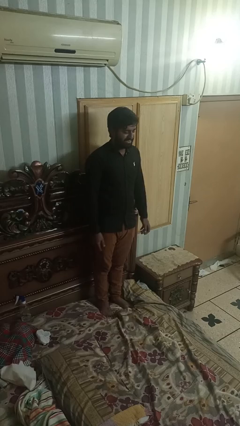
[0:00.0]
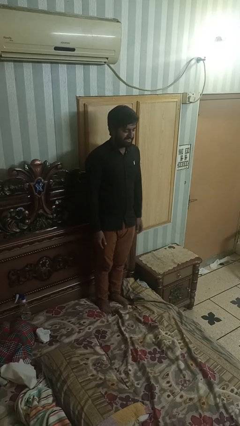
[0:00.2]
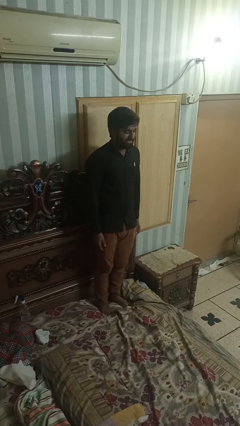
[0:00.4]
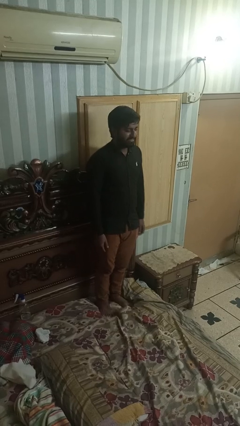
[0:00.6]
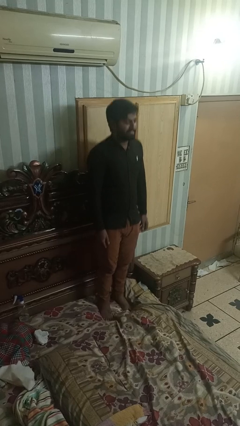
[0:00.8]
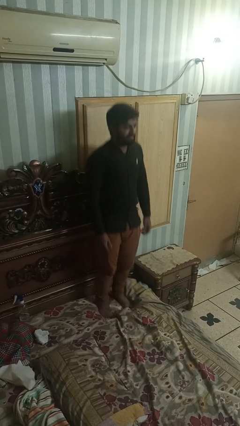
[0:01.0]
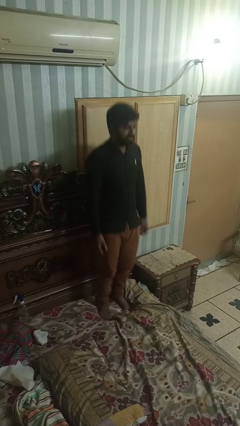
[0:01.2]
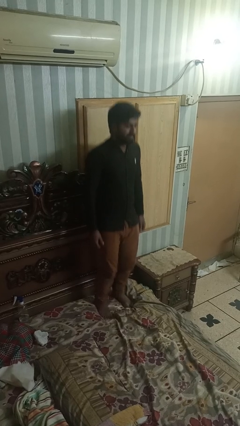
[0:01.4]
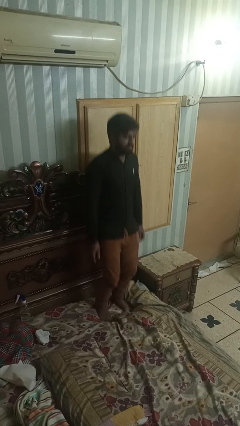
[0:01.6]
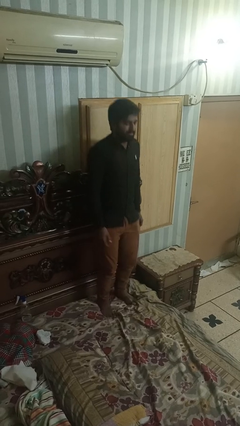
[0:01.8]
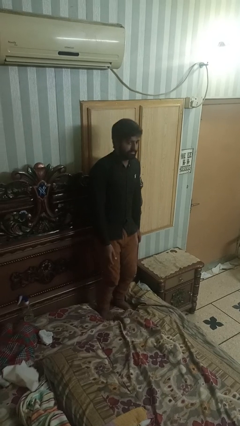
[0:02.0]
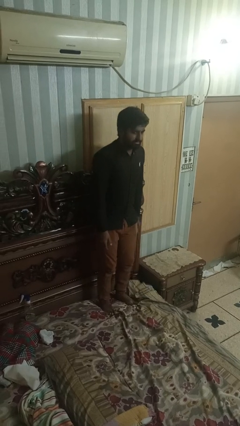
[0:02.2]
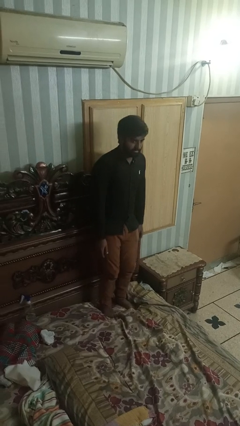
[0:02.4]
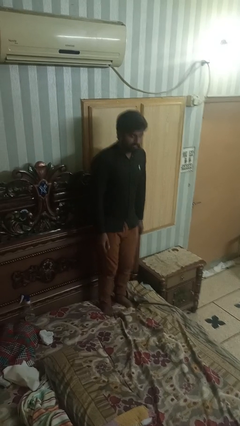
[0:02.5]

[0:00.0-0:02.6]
person jumps on bed

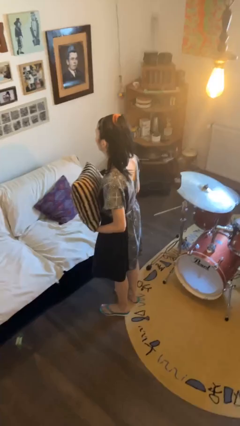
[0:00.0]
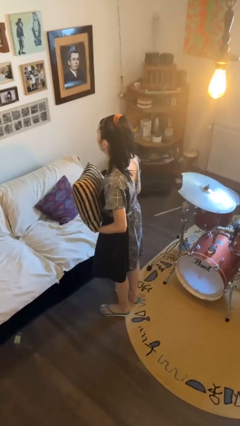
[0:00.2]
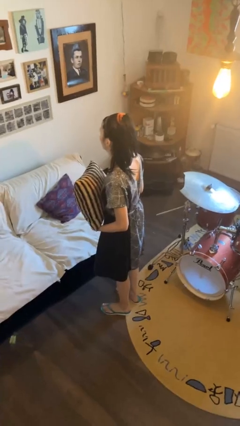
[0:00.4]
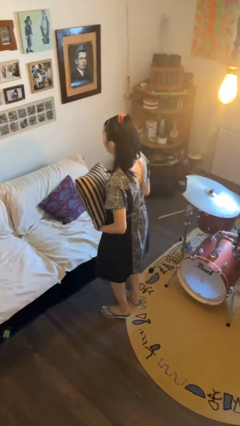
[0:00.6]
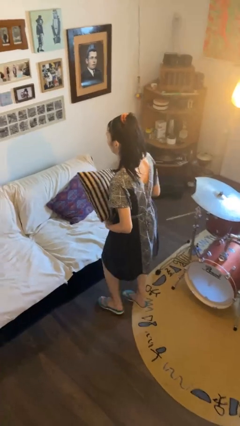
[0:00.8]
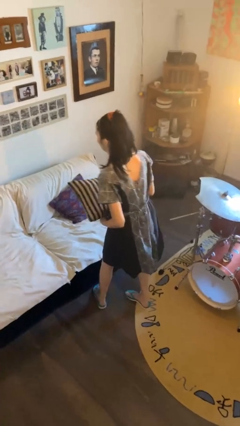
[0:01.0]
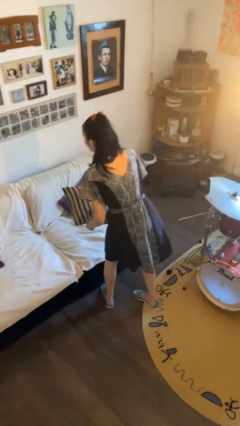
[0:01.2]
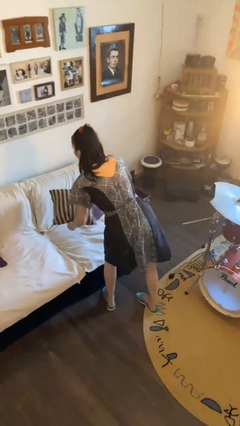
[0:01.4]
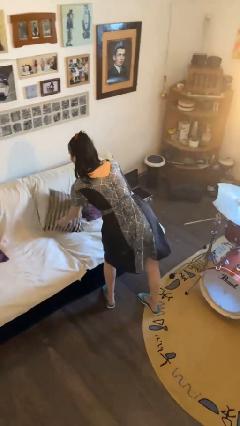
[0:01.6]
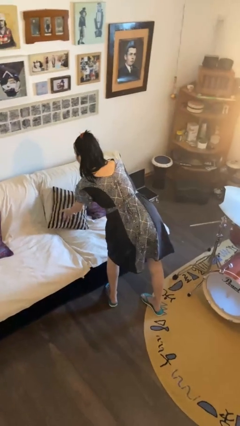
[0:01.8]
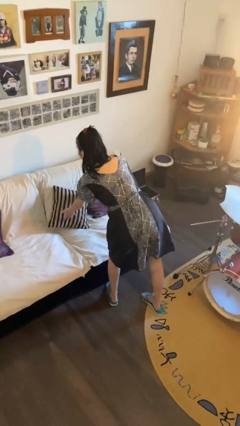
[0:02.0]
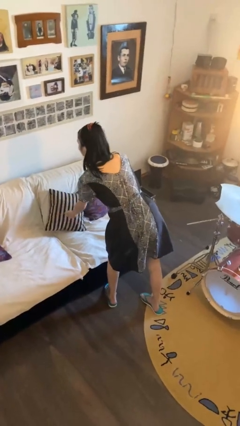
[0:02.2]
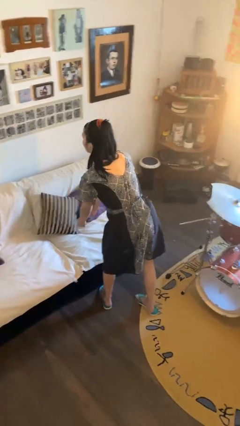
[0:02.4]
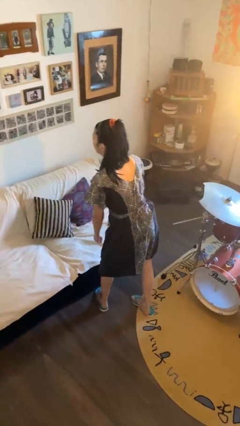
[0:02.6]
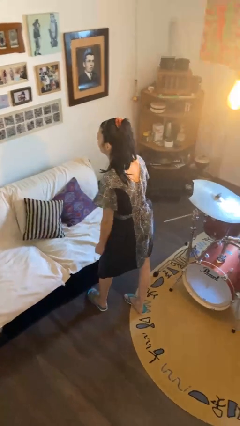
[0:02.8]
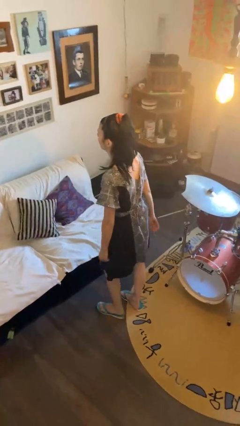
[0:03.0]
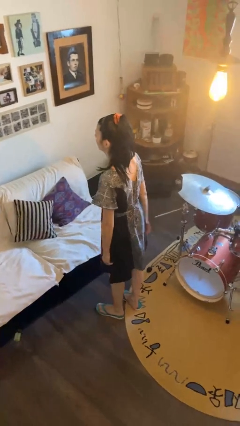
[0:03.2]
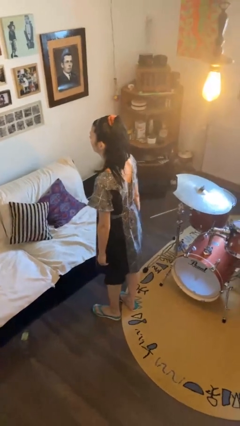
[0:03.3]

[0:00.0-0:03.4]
person puts down object on couch

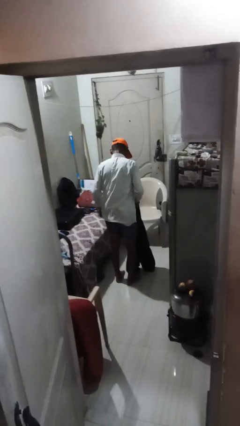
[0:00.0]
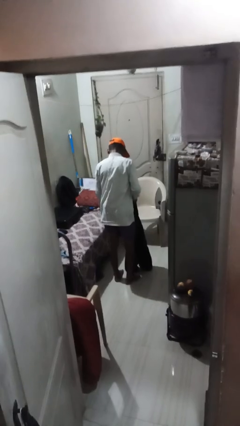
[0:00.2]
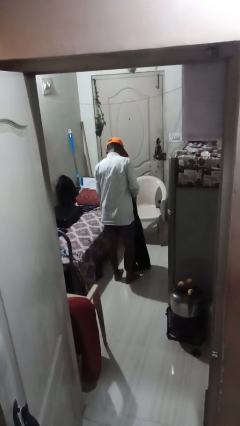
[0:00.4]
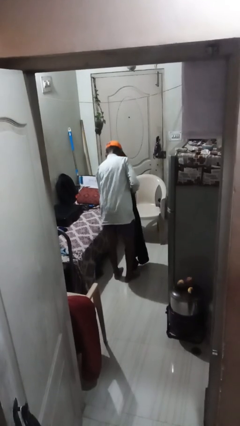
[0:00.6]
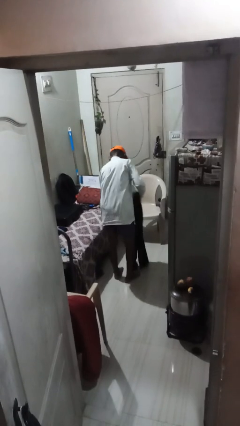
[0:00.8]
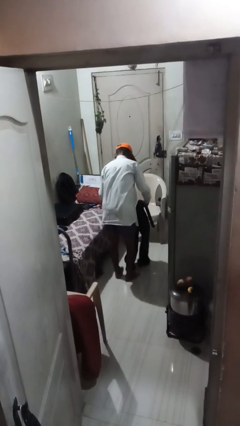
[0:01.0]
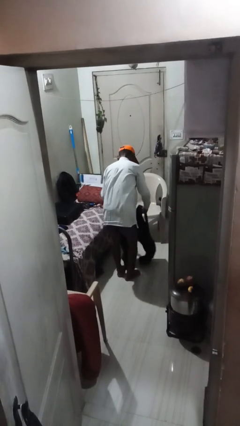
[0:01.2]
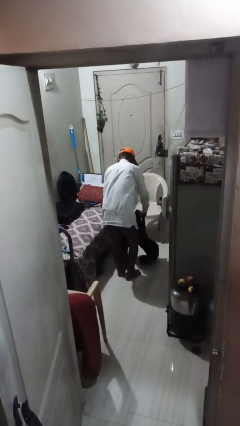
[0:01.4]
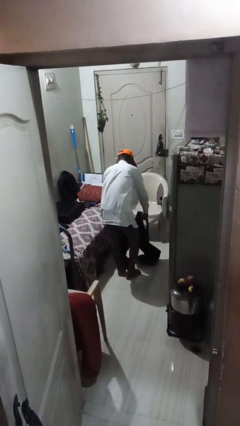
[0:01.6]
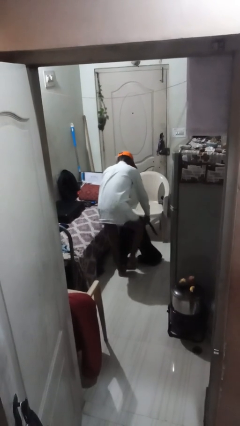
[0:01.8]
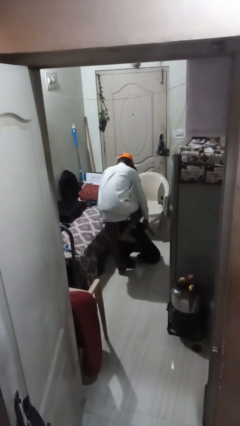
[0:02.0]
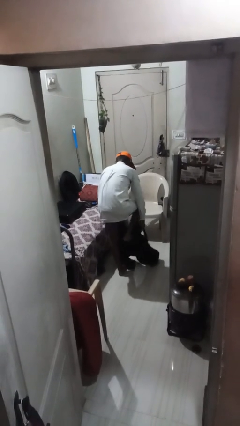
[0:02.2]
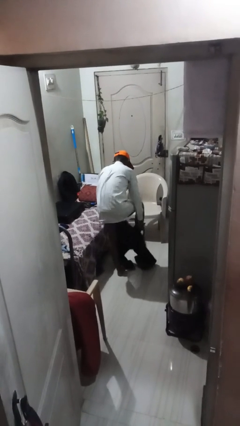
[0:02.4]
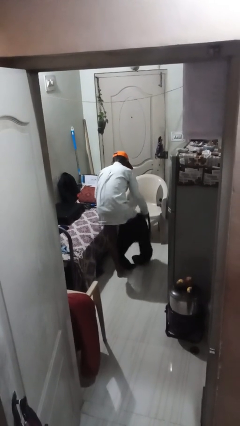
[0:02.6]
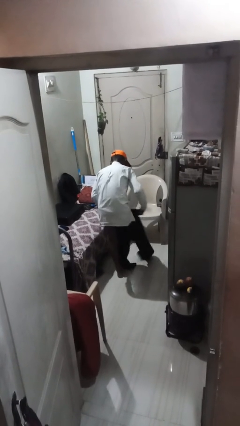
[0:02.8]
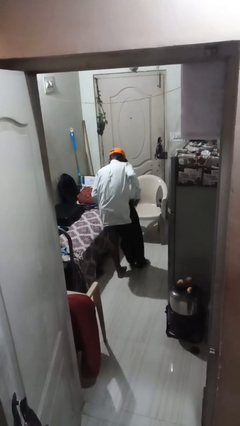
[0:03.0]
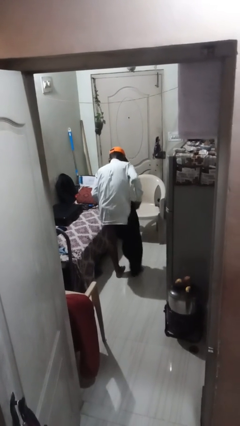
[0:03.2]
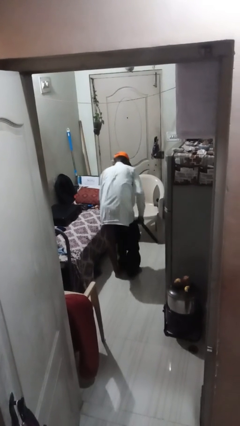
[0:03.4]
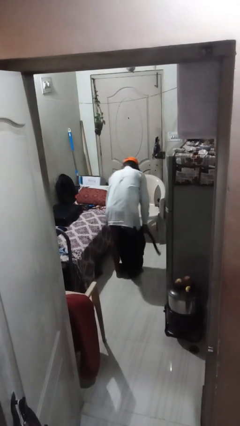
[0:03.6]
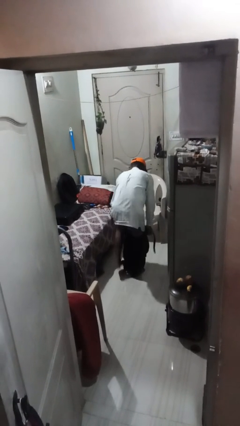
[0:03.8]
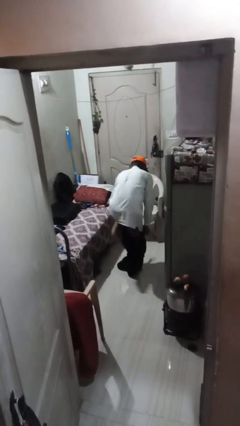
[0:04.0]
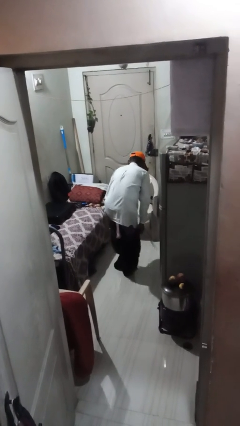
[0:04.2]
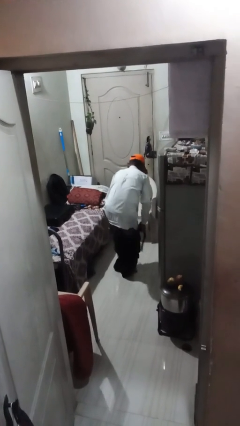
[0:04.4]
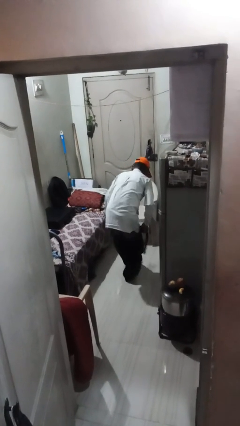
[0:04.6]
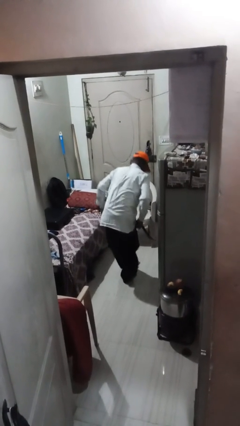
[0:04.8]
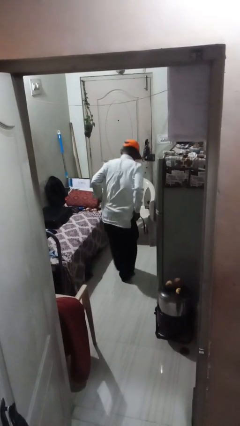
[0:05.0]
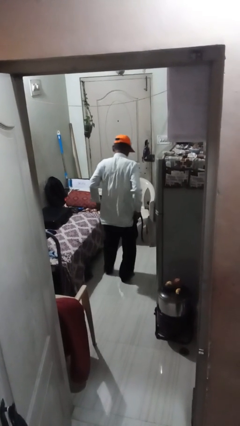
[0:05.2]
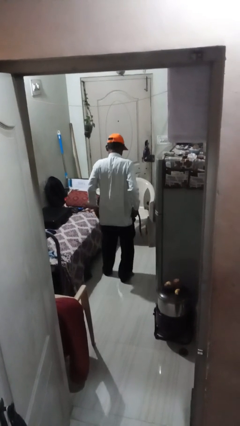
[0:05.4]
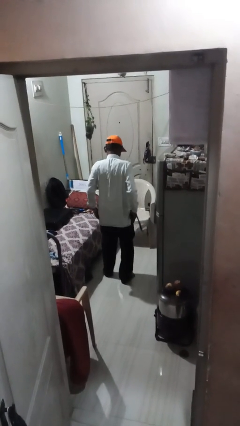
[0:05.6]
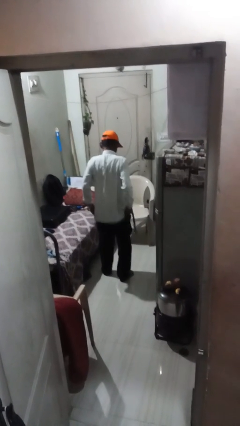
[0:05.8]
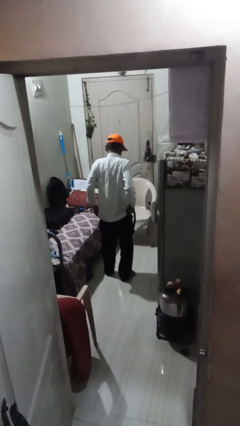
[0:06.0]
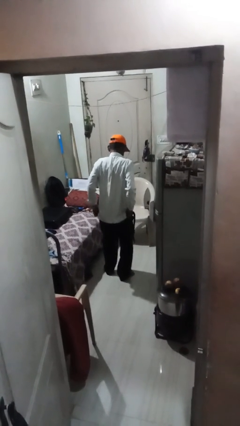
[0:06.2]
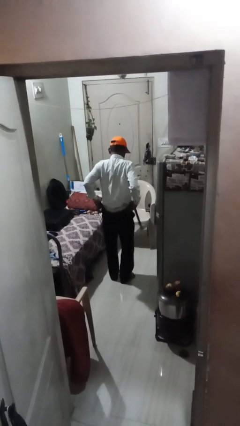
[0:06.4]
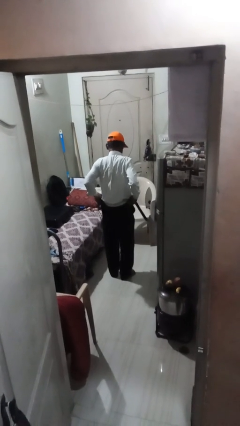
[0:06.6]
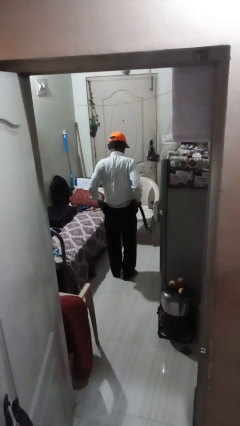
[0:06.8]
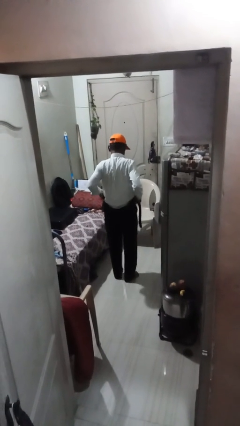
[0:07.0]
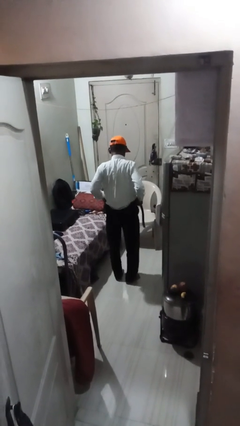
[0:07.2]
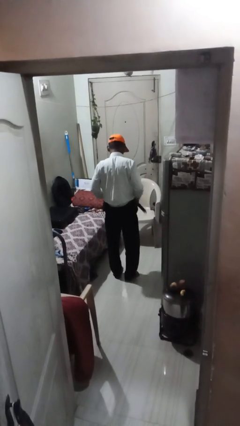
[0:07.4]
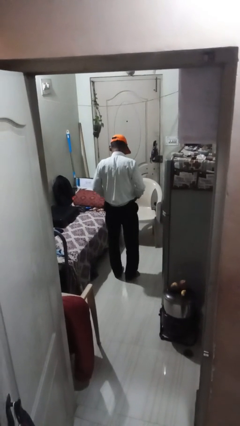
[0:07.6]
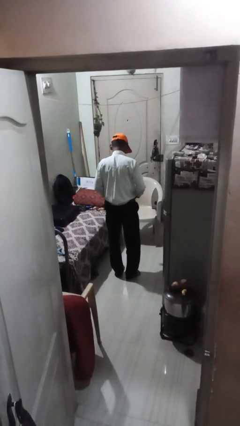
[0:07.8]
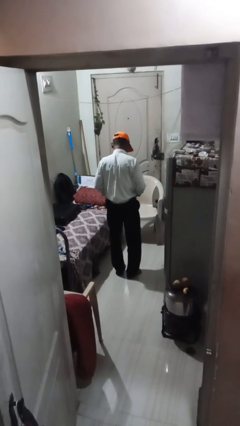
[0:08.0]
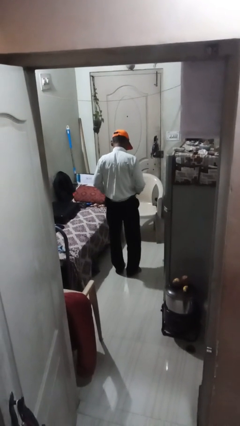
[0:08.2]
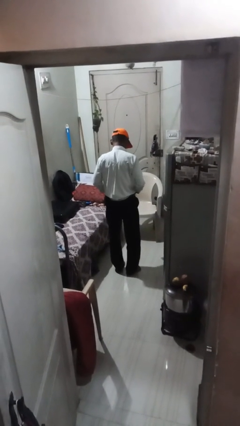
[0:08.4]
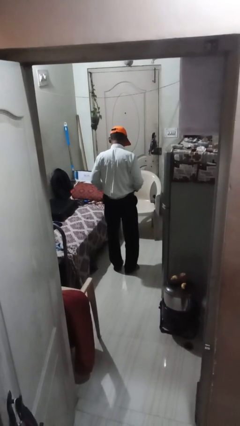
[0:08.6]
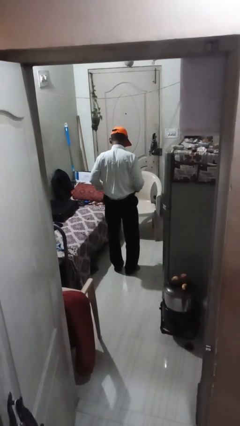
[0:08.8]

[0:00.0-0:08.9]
person puts on pants

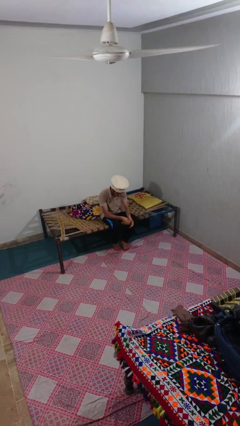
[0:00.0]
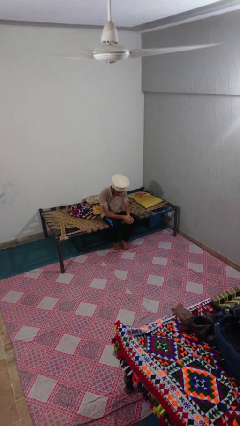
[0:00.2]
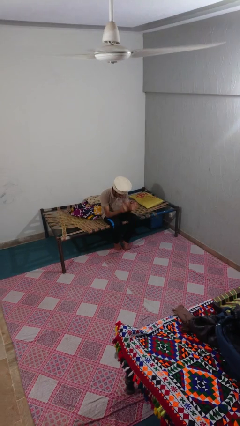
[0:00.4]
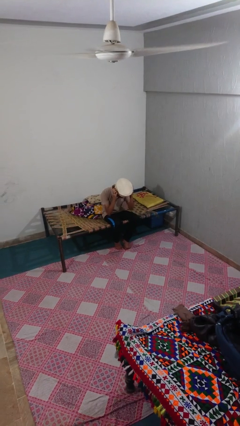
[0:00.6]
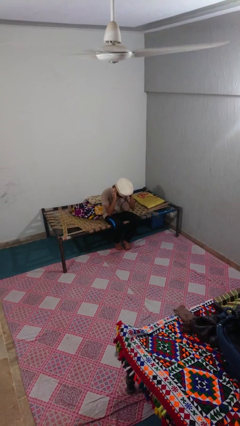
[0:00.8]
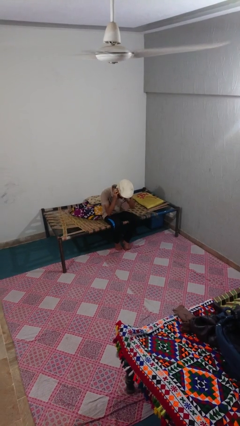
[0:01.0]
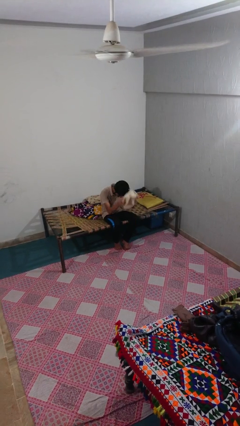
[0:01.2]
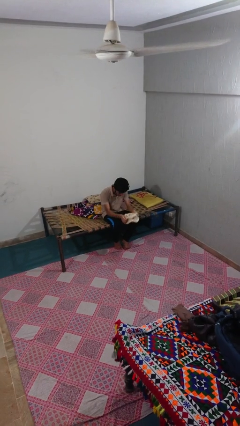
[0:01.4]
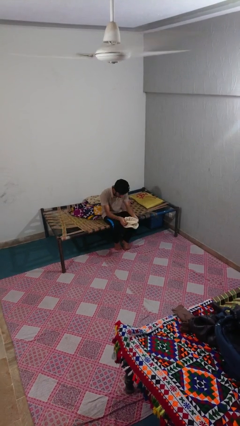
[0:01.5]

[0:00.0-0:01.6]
person takes off hat

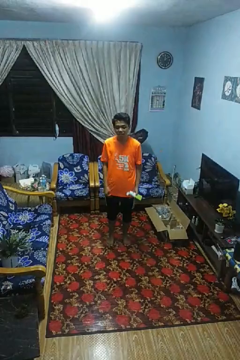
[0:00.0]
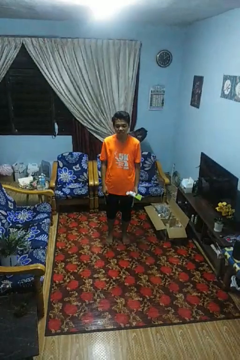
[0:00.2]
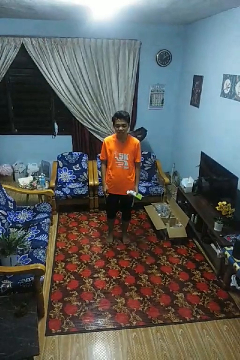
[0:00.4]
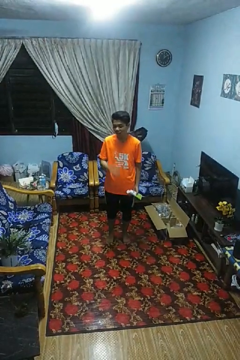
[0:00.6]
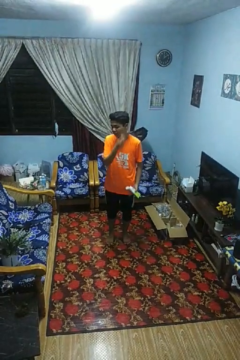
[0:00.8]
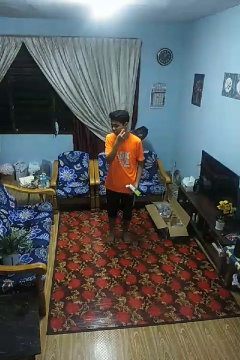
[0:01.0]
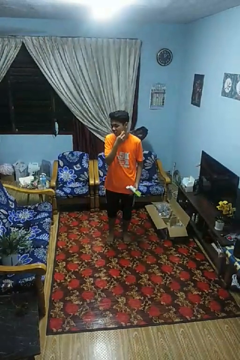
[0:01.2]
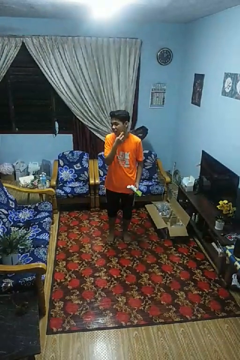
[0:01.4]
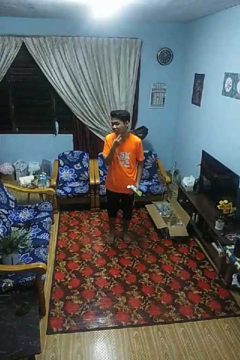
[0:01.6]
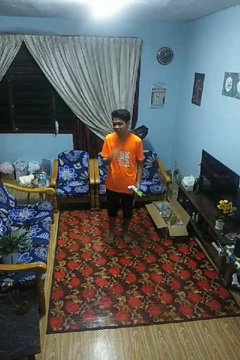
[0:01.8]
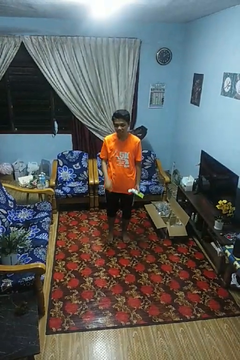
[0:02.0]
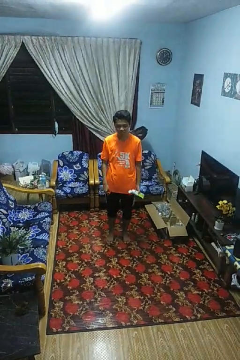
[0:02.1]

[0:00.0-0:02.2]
person shaves face
